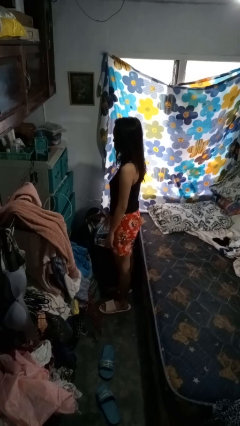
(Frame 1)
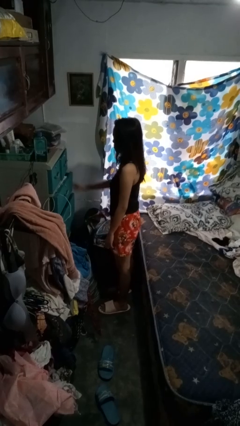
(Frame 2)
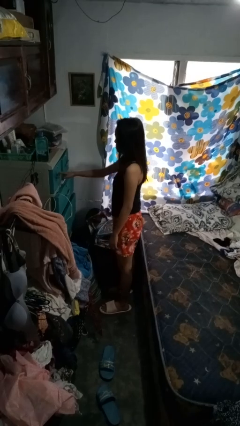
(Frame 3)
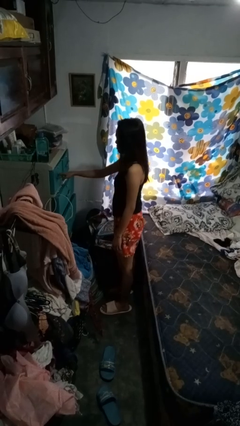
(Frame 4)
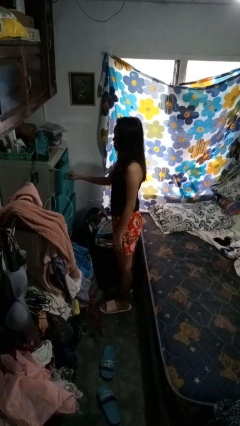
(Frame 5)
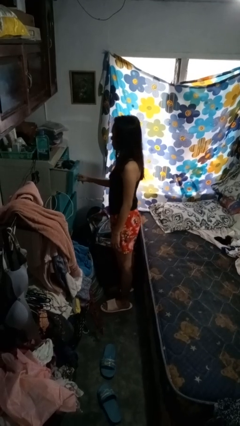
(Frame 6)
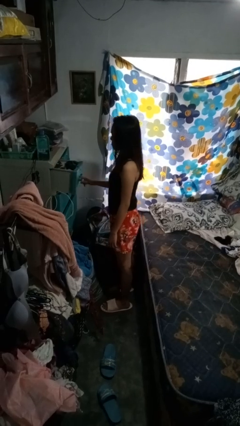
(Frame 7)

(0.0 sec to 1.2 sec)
person opens dresser drawer

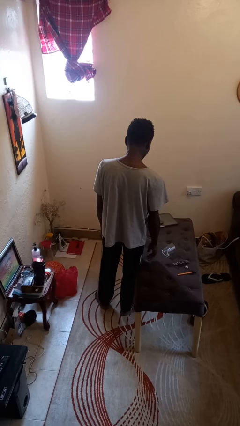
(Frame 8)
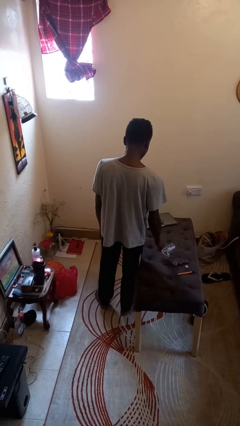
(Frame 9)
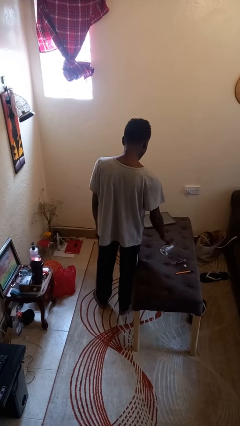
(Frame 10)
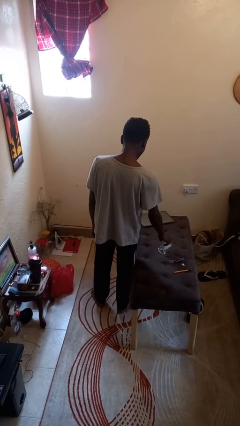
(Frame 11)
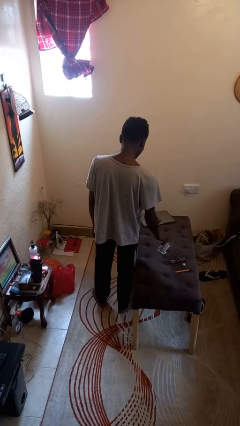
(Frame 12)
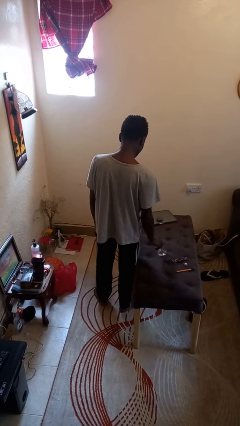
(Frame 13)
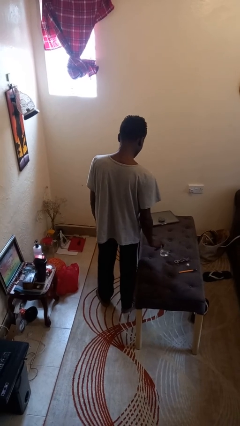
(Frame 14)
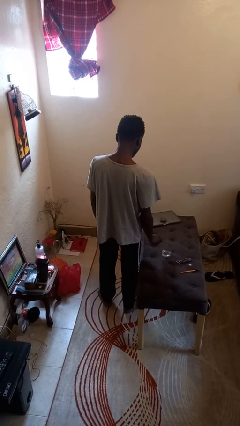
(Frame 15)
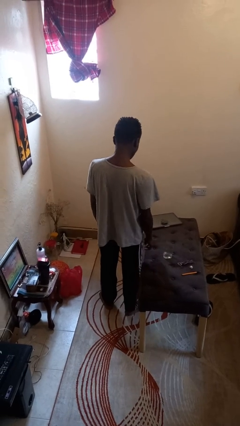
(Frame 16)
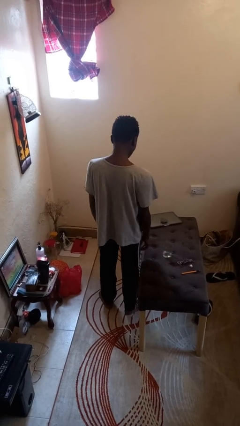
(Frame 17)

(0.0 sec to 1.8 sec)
person sets upright glass

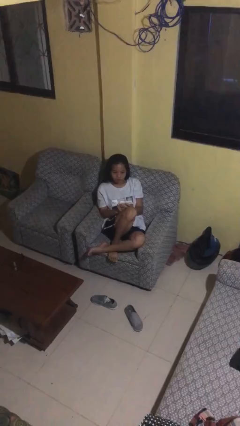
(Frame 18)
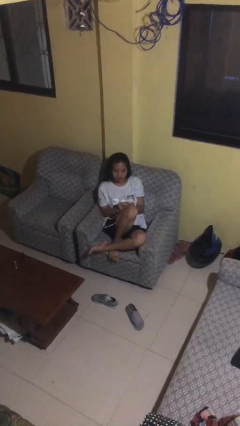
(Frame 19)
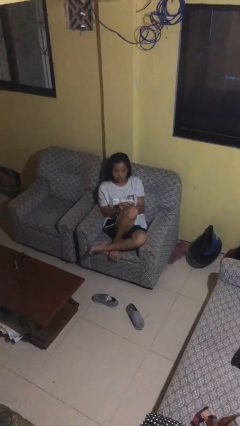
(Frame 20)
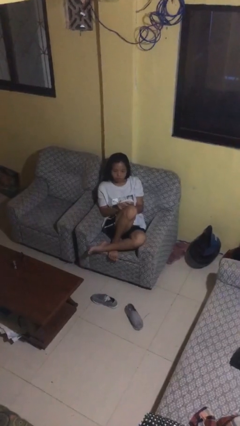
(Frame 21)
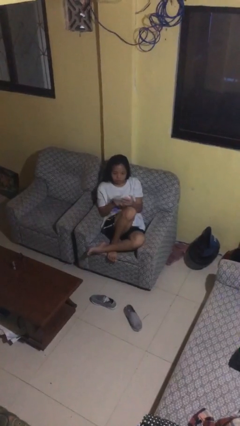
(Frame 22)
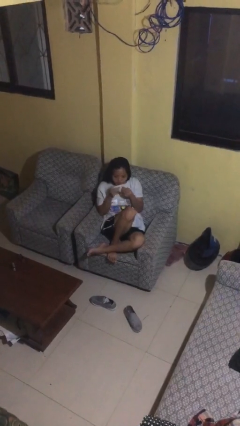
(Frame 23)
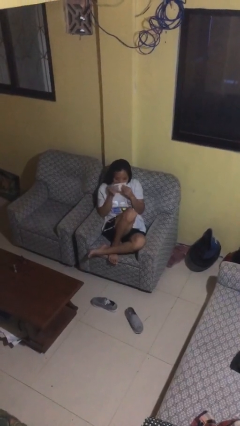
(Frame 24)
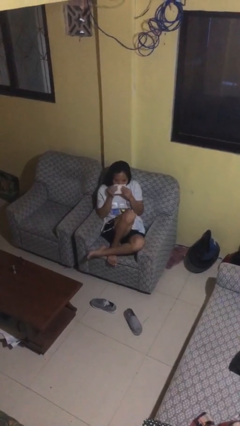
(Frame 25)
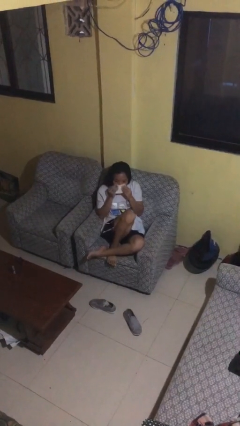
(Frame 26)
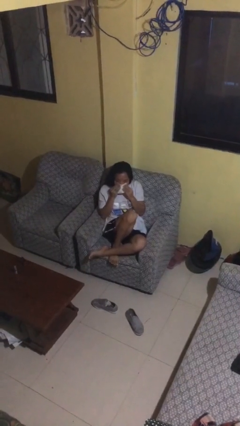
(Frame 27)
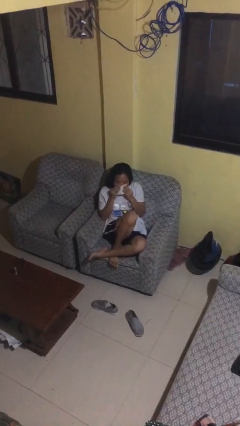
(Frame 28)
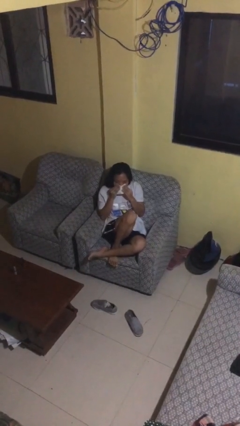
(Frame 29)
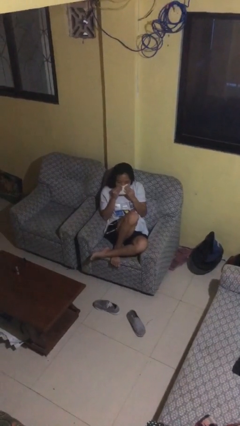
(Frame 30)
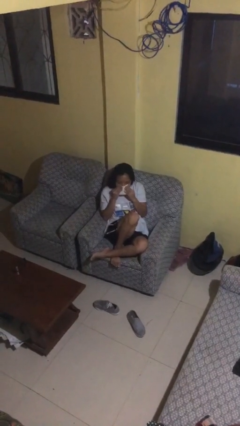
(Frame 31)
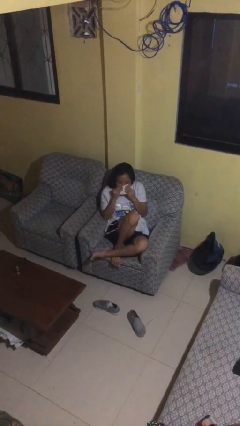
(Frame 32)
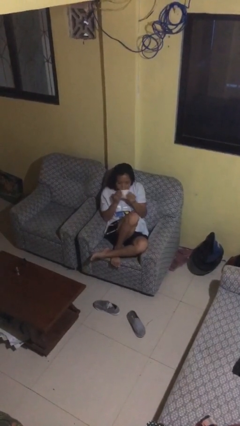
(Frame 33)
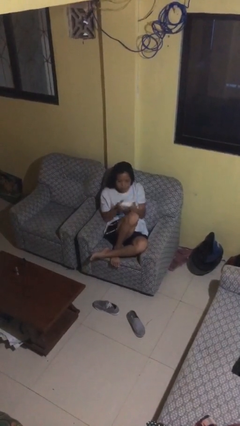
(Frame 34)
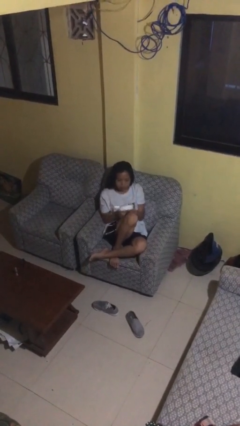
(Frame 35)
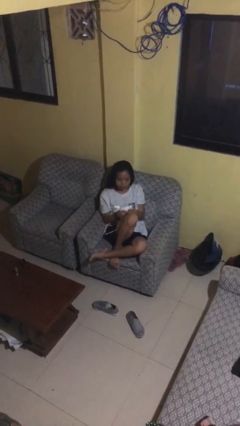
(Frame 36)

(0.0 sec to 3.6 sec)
person blows nose

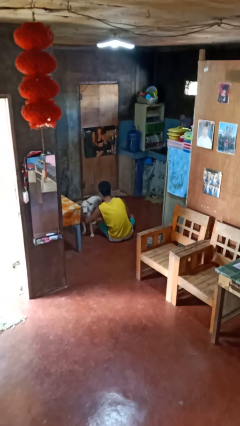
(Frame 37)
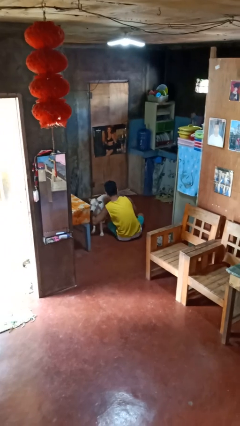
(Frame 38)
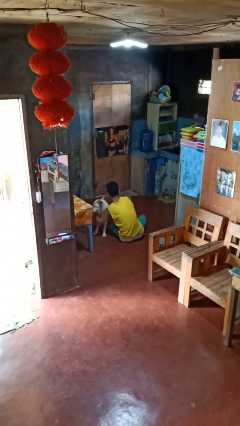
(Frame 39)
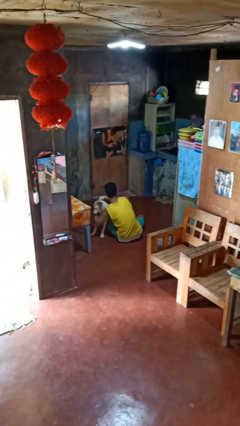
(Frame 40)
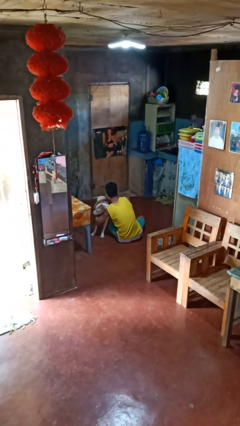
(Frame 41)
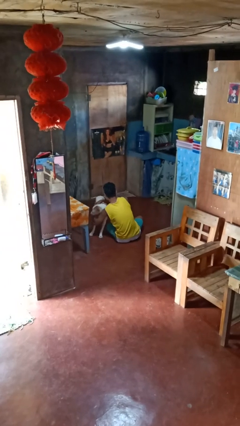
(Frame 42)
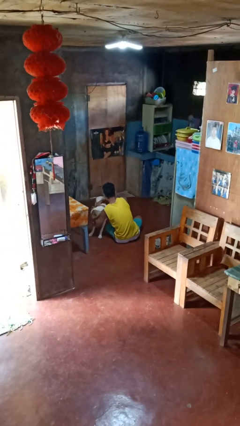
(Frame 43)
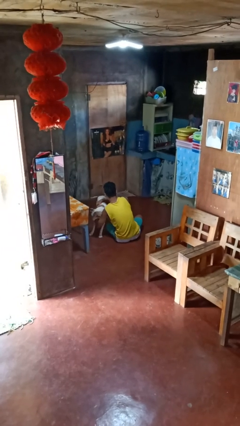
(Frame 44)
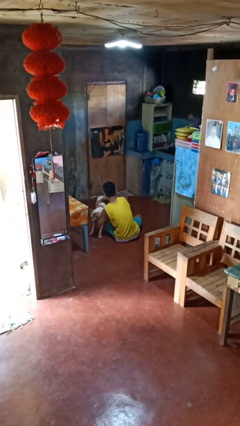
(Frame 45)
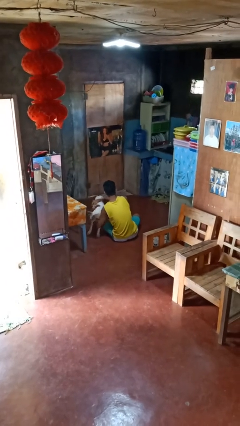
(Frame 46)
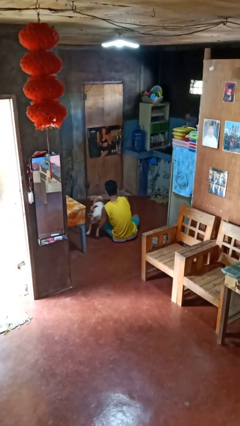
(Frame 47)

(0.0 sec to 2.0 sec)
person hugs dog

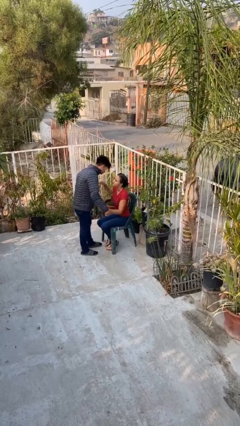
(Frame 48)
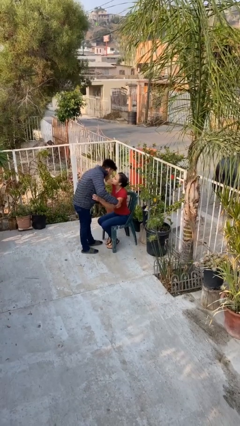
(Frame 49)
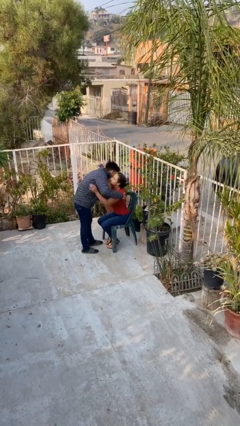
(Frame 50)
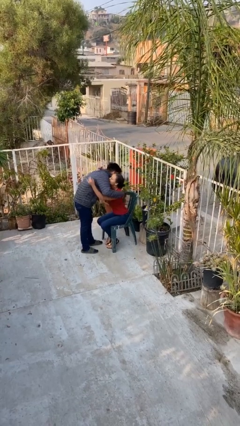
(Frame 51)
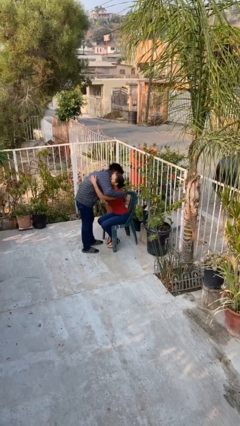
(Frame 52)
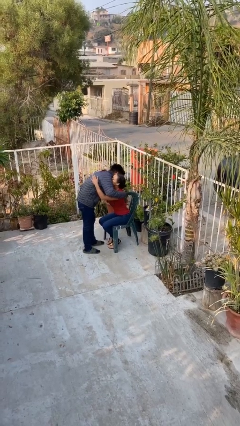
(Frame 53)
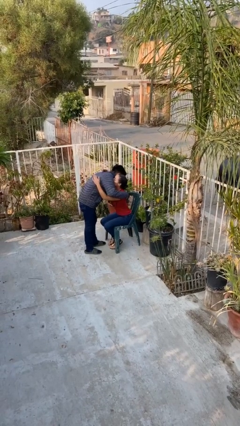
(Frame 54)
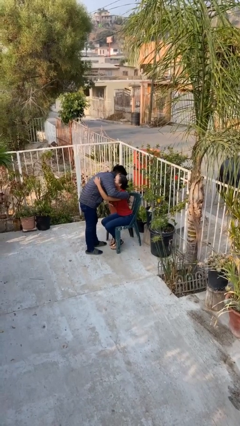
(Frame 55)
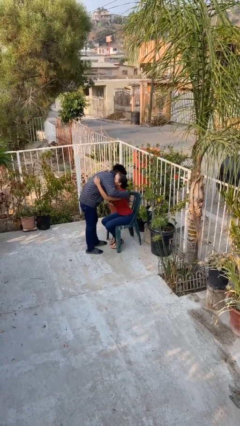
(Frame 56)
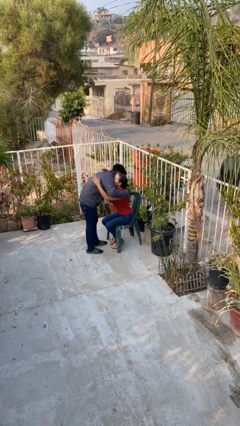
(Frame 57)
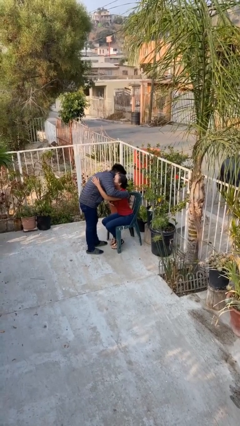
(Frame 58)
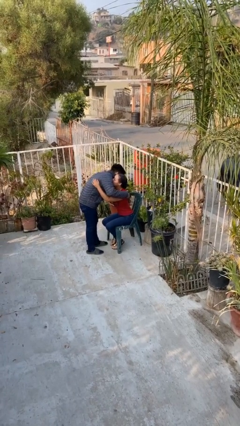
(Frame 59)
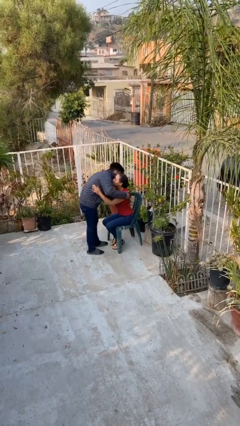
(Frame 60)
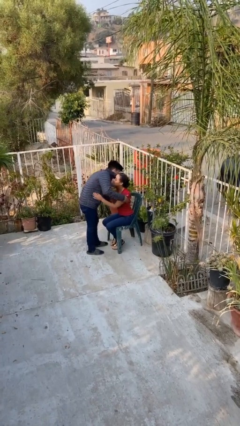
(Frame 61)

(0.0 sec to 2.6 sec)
person embraces person

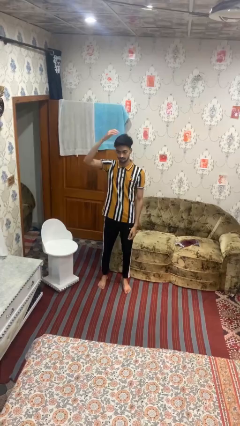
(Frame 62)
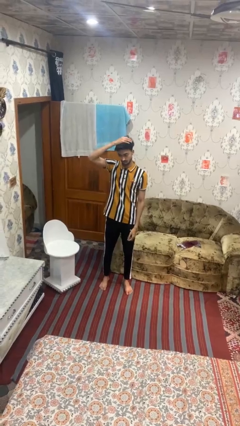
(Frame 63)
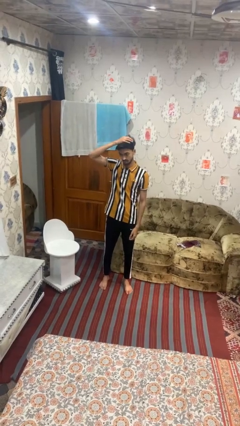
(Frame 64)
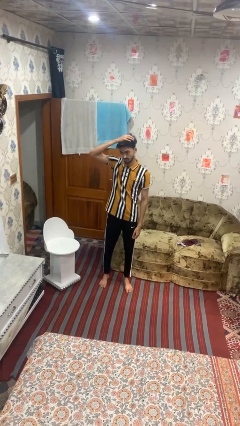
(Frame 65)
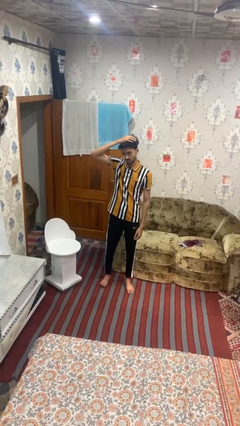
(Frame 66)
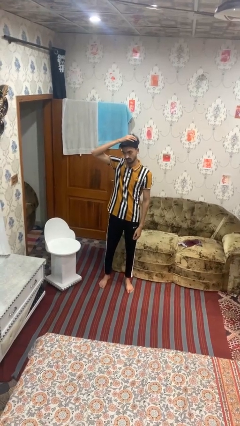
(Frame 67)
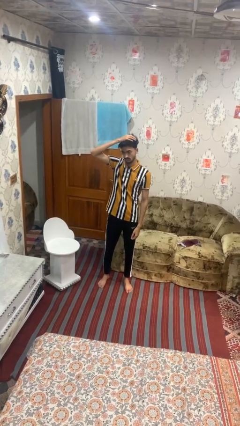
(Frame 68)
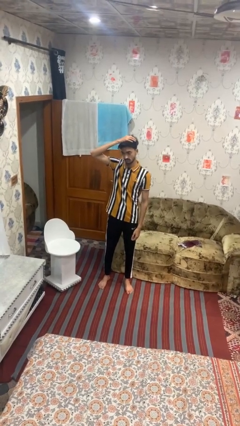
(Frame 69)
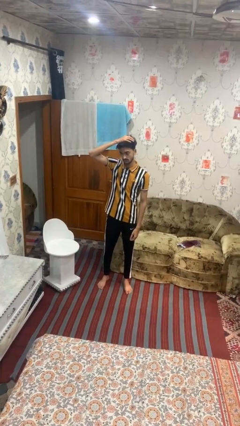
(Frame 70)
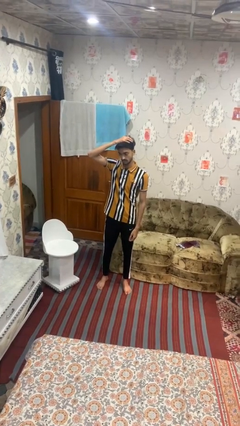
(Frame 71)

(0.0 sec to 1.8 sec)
person pats head

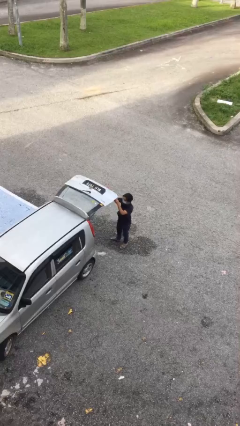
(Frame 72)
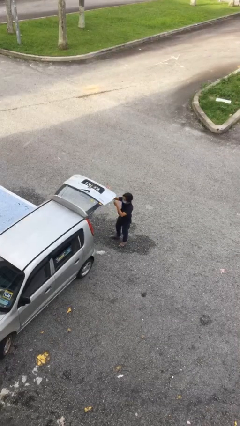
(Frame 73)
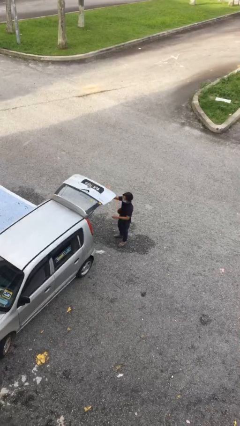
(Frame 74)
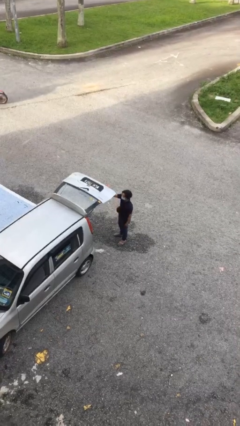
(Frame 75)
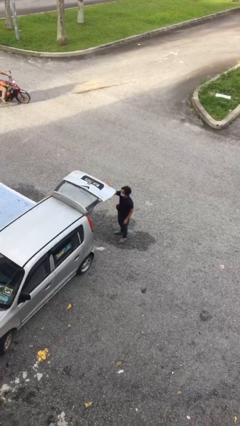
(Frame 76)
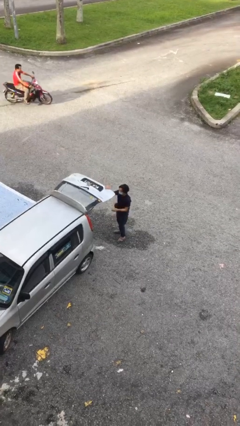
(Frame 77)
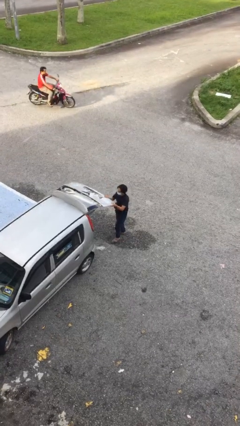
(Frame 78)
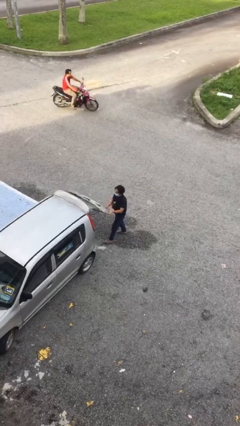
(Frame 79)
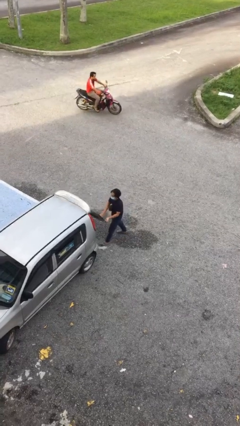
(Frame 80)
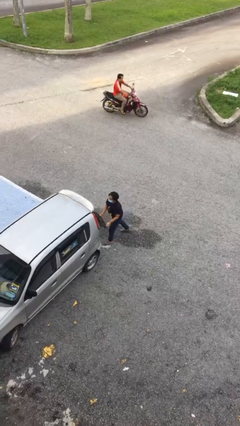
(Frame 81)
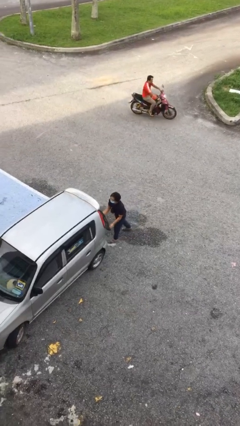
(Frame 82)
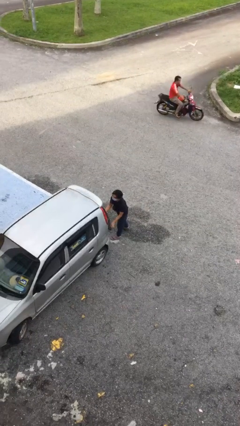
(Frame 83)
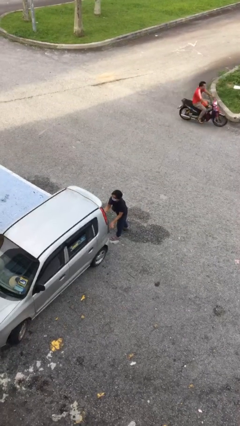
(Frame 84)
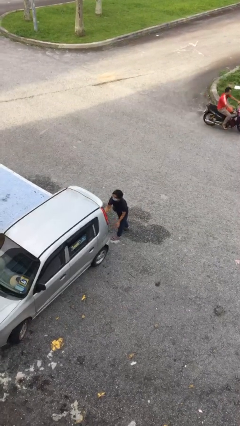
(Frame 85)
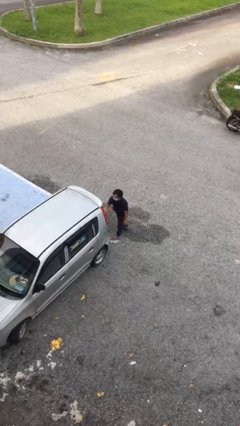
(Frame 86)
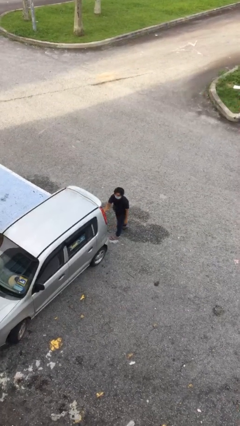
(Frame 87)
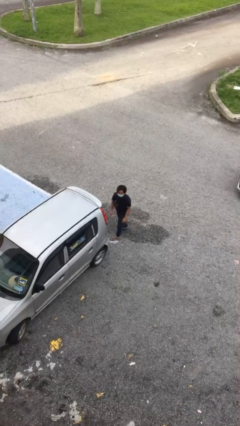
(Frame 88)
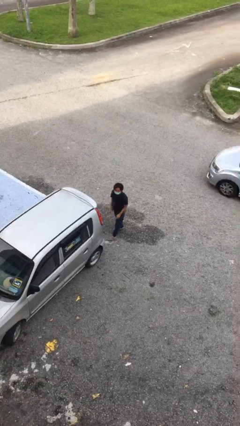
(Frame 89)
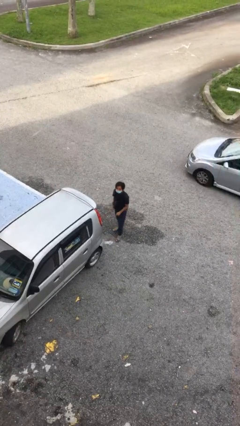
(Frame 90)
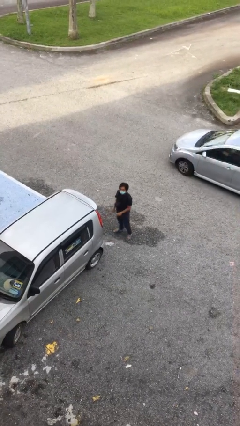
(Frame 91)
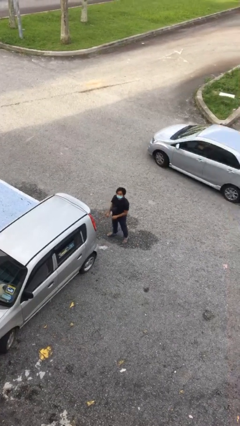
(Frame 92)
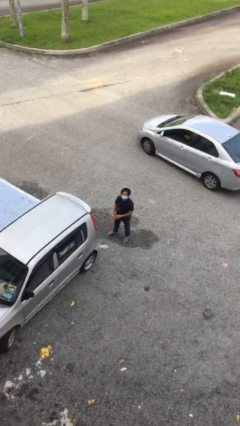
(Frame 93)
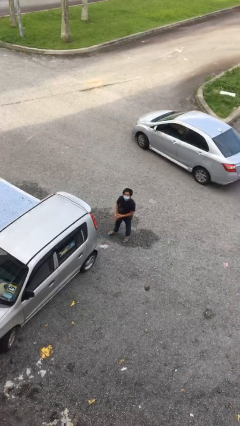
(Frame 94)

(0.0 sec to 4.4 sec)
person closes car trunk
